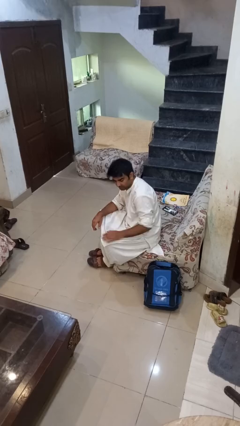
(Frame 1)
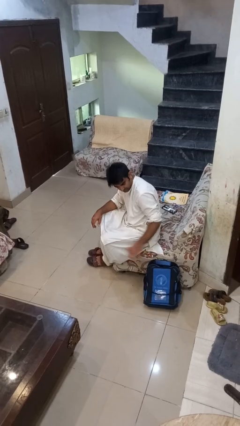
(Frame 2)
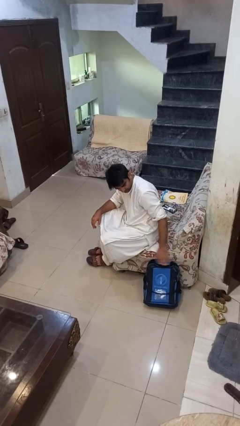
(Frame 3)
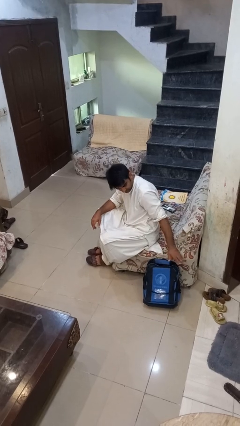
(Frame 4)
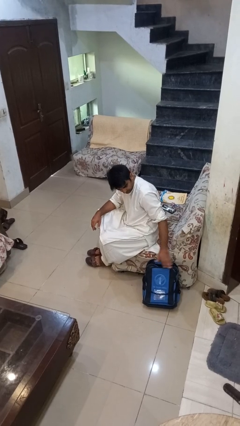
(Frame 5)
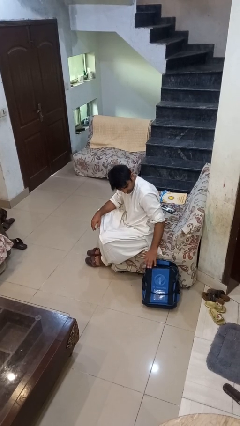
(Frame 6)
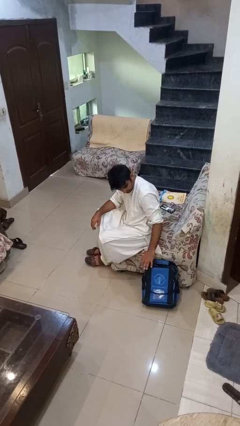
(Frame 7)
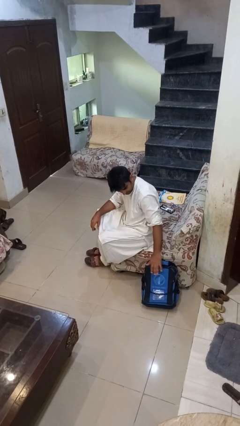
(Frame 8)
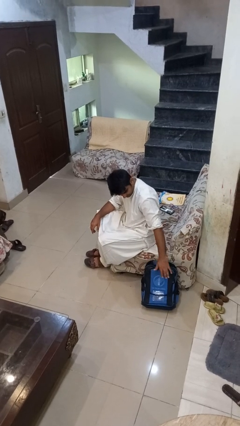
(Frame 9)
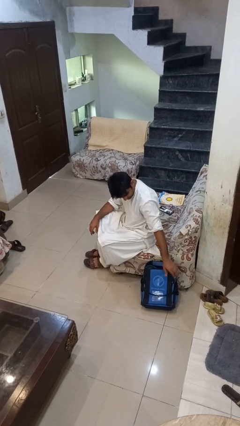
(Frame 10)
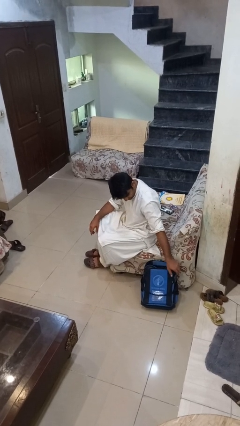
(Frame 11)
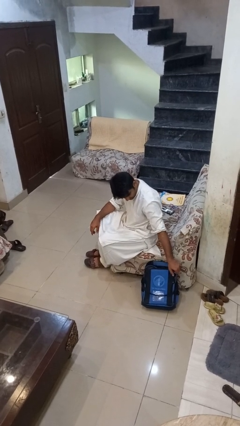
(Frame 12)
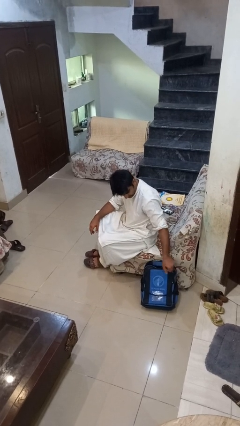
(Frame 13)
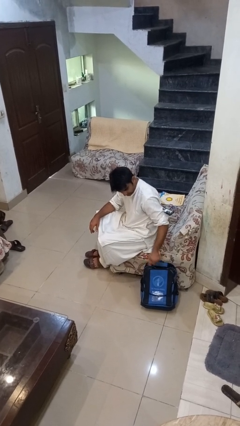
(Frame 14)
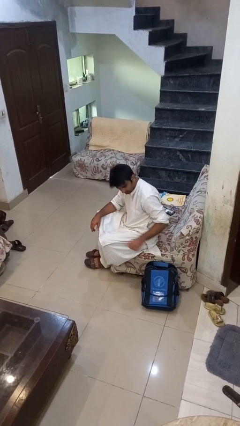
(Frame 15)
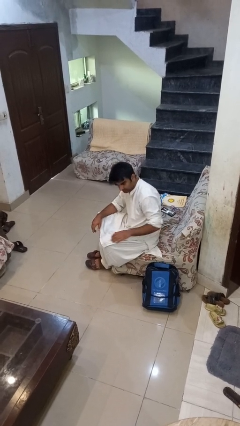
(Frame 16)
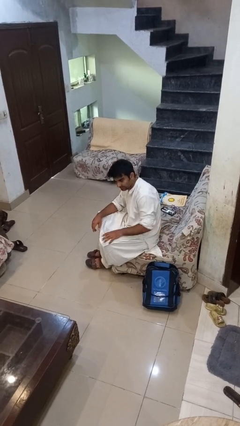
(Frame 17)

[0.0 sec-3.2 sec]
person waves hand over object

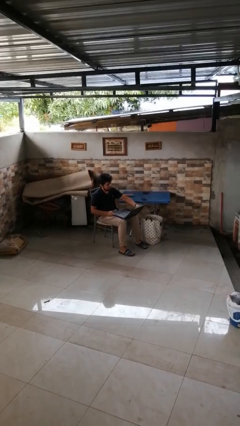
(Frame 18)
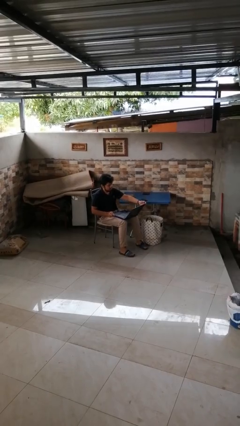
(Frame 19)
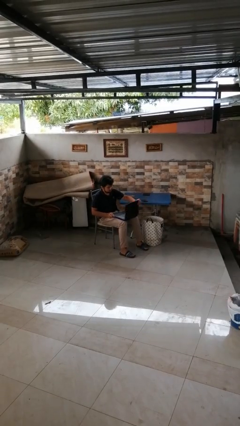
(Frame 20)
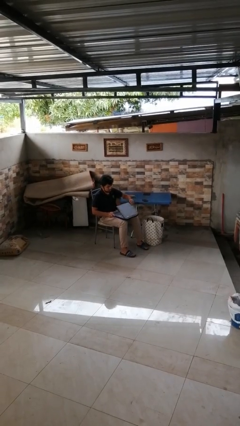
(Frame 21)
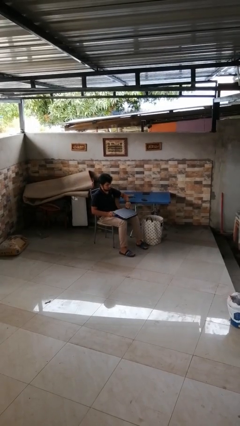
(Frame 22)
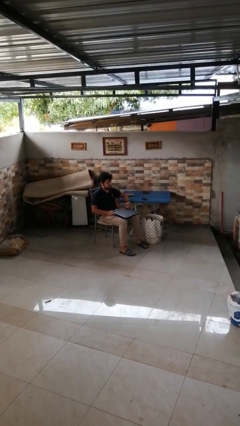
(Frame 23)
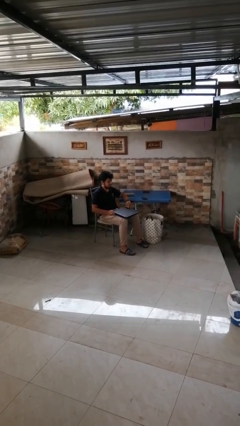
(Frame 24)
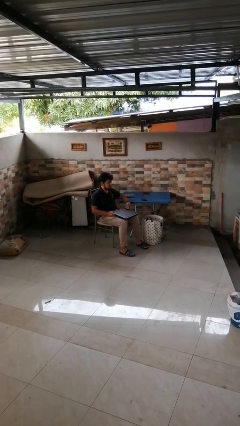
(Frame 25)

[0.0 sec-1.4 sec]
person closes laptop

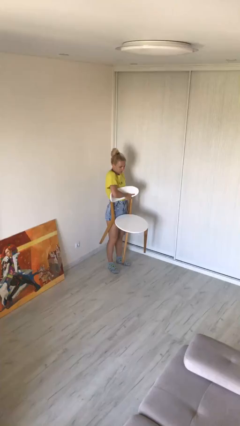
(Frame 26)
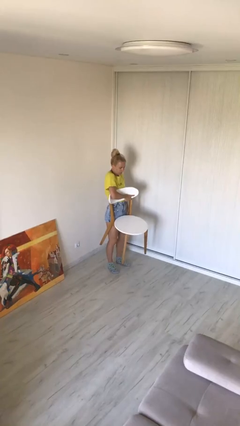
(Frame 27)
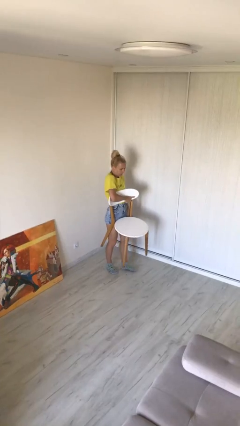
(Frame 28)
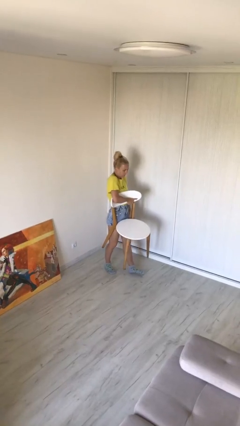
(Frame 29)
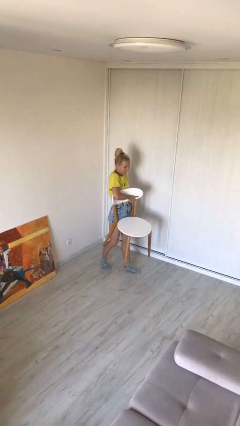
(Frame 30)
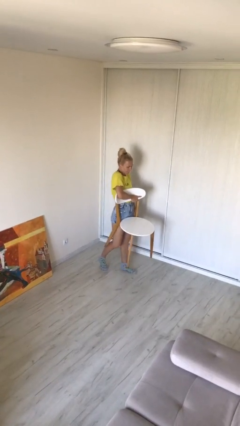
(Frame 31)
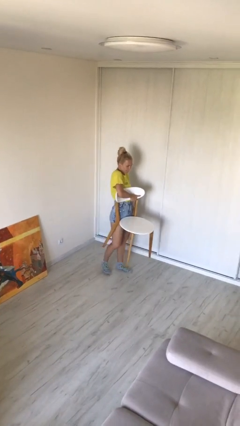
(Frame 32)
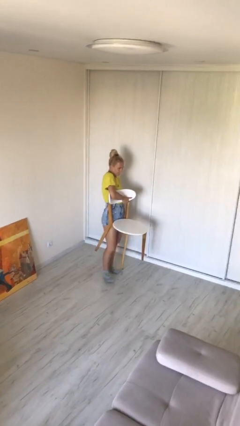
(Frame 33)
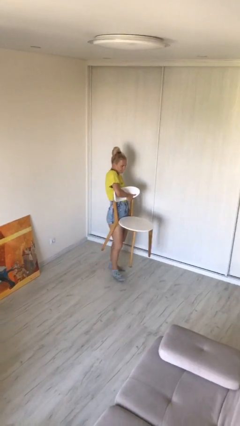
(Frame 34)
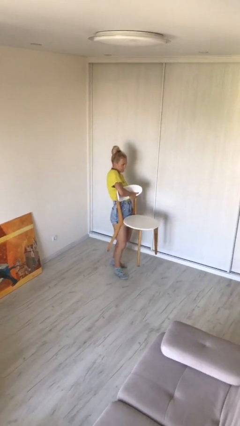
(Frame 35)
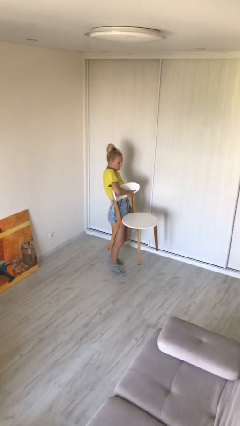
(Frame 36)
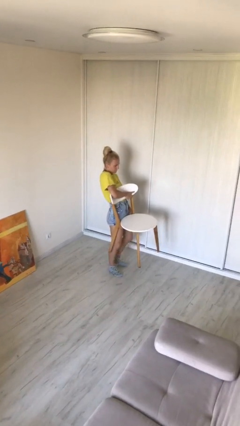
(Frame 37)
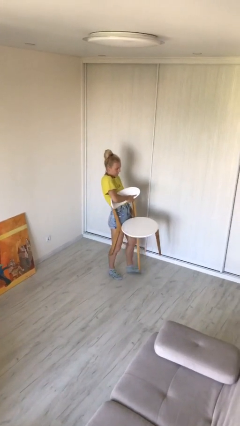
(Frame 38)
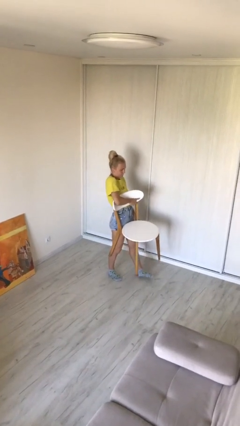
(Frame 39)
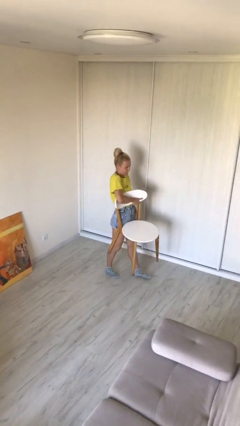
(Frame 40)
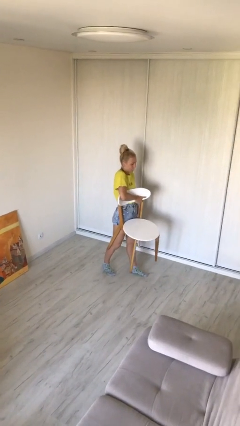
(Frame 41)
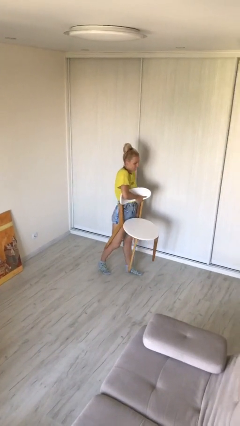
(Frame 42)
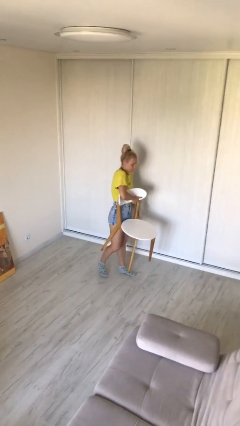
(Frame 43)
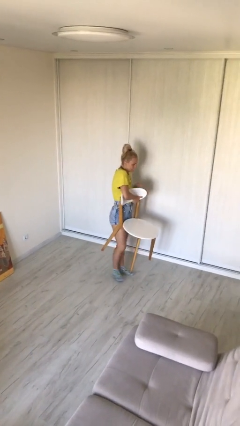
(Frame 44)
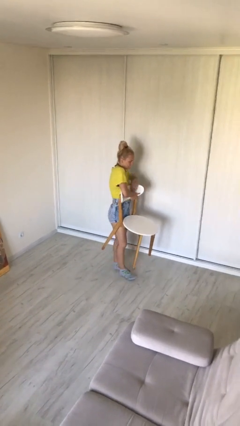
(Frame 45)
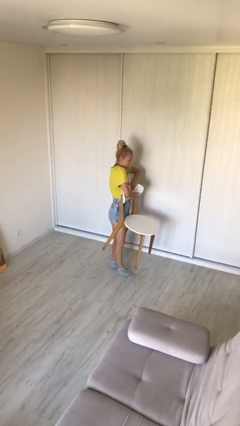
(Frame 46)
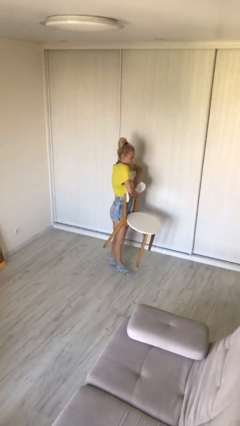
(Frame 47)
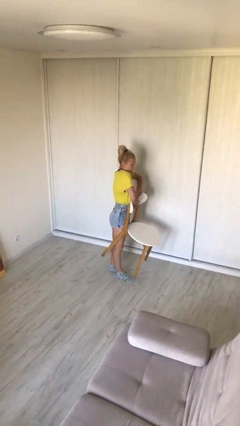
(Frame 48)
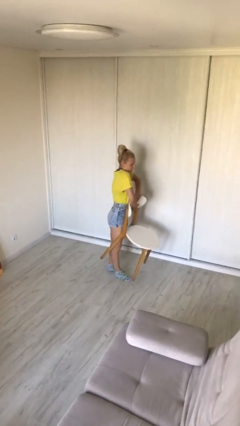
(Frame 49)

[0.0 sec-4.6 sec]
person carries heavy object

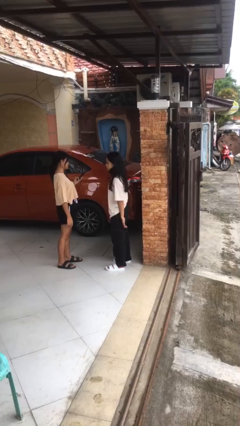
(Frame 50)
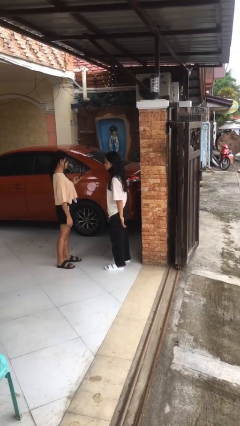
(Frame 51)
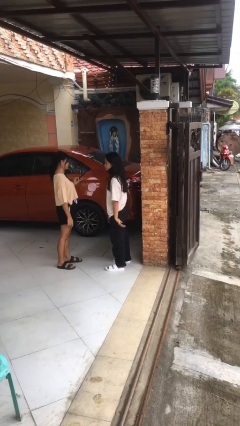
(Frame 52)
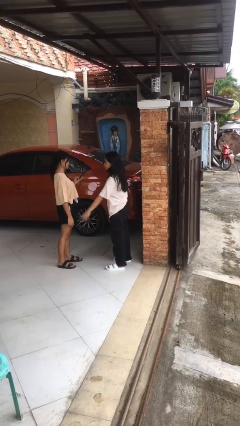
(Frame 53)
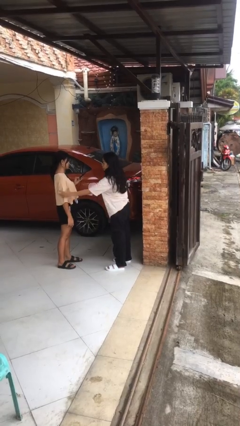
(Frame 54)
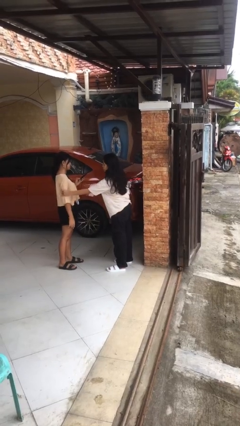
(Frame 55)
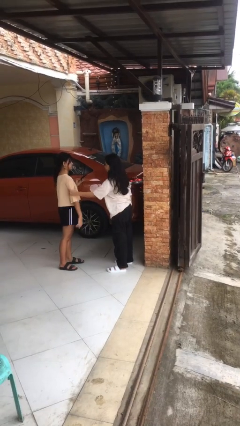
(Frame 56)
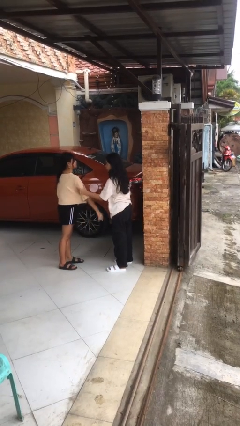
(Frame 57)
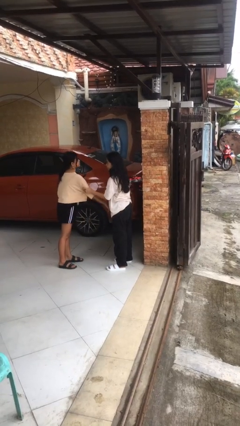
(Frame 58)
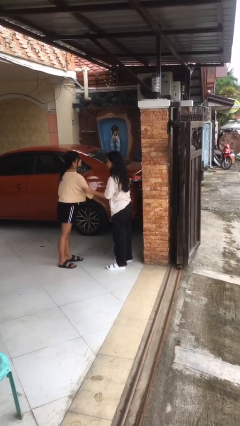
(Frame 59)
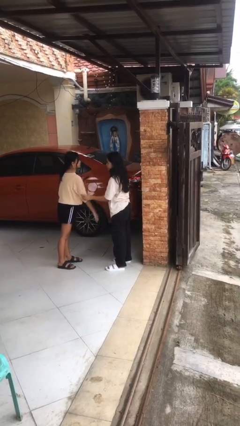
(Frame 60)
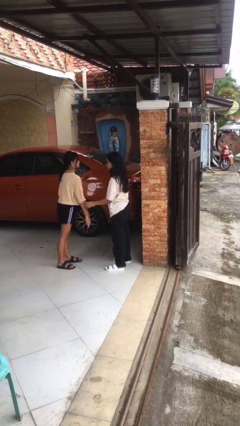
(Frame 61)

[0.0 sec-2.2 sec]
person grabs person by bicep

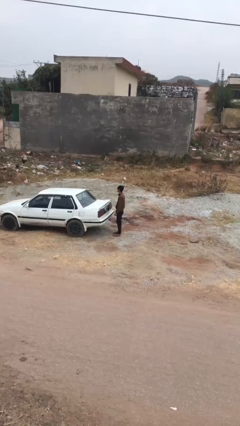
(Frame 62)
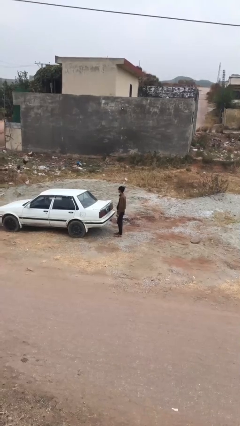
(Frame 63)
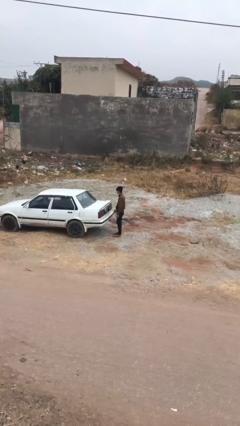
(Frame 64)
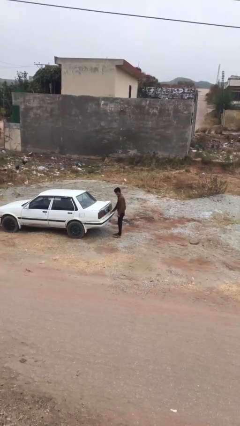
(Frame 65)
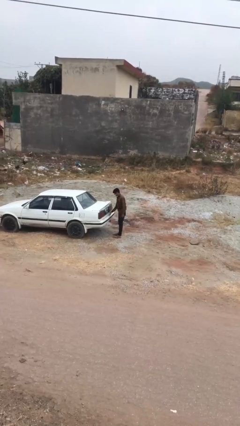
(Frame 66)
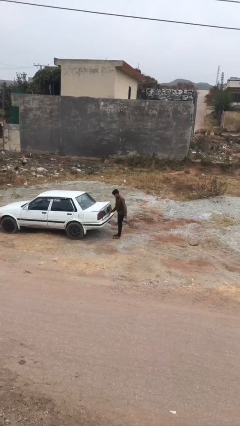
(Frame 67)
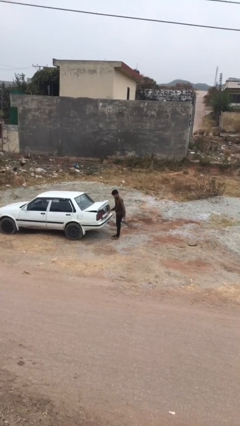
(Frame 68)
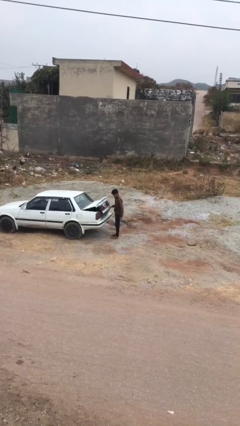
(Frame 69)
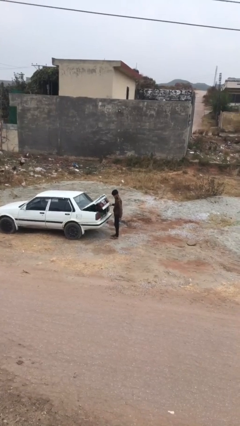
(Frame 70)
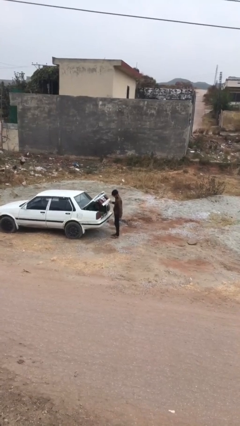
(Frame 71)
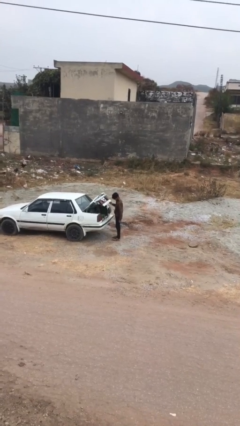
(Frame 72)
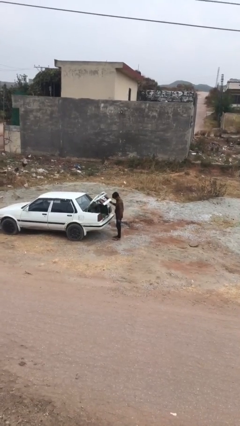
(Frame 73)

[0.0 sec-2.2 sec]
person opens car trunk

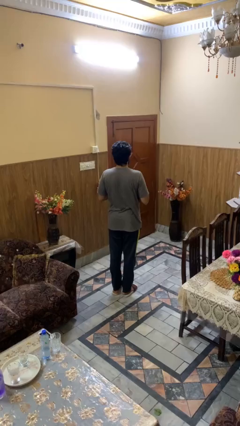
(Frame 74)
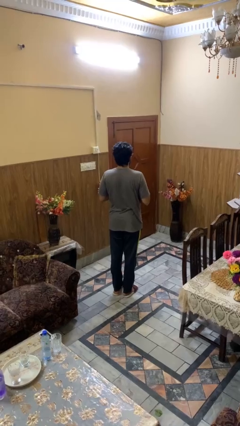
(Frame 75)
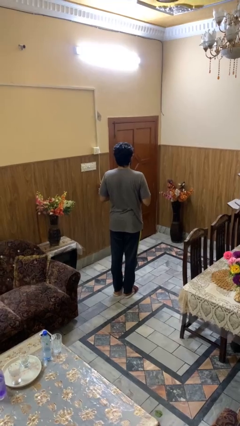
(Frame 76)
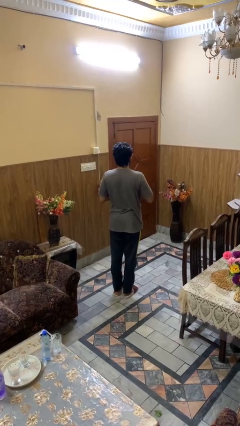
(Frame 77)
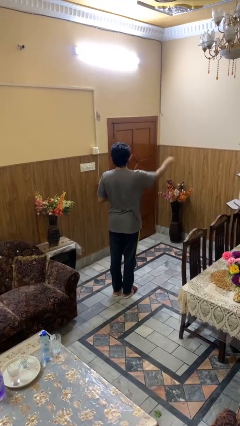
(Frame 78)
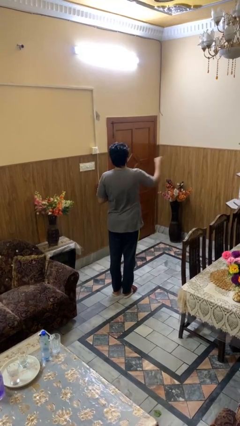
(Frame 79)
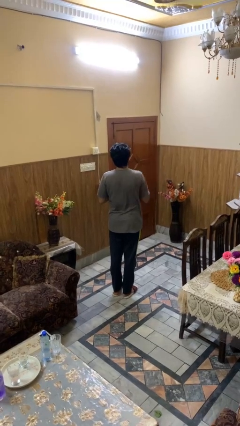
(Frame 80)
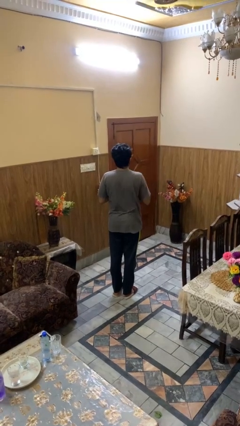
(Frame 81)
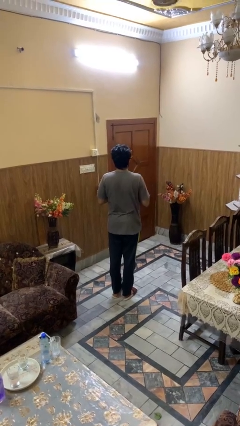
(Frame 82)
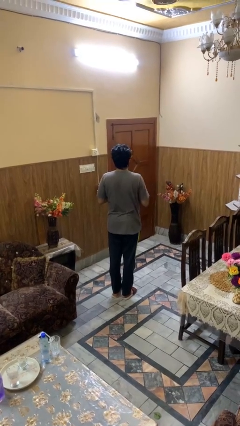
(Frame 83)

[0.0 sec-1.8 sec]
person punches

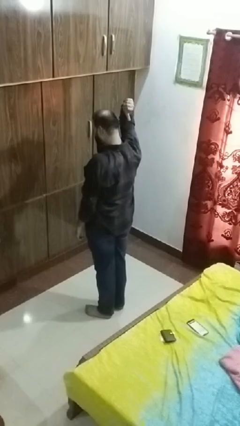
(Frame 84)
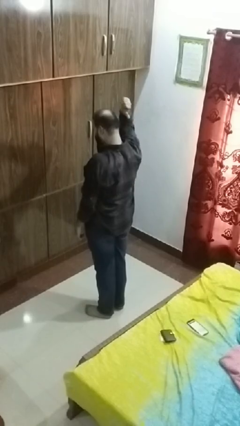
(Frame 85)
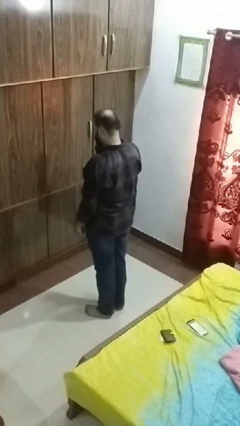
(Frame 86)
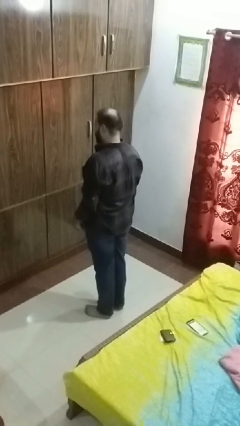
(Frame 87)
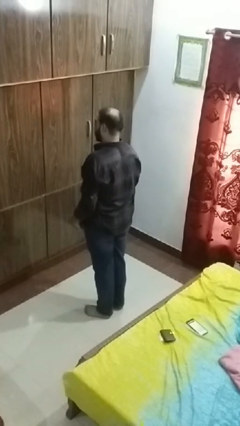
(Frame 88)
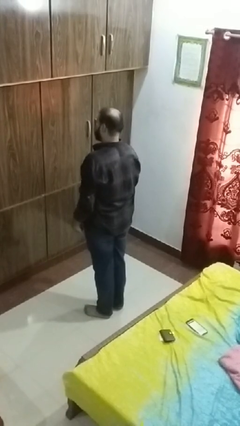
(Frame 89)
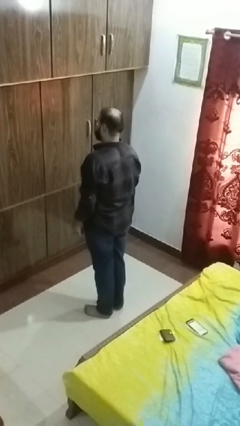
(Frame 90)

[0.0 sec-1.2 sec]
person gestures behind me
